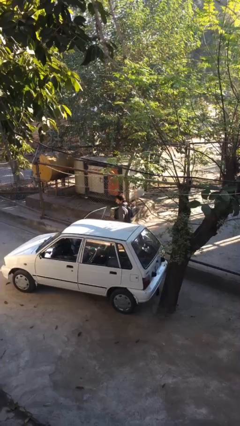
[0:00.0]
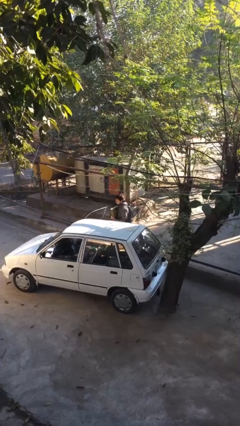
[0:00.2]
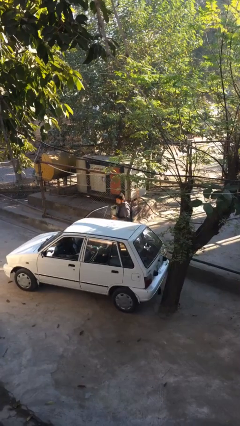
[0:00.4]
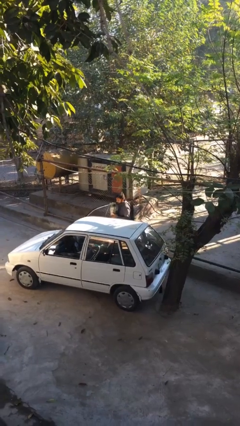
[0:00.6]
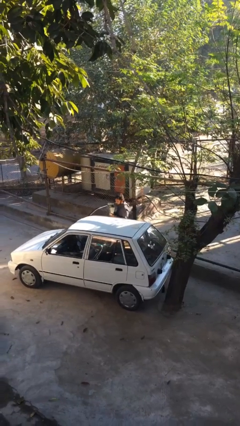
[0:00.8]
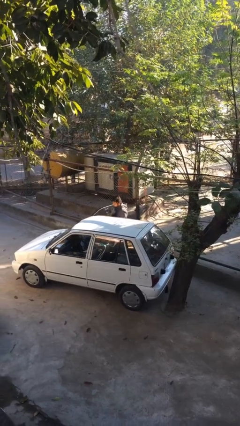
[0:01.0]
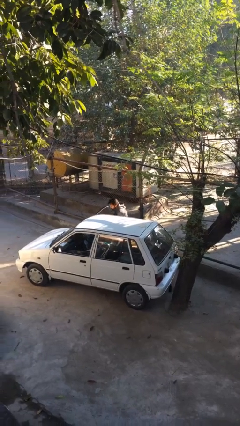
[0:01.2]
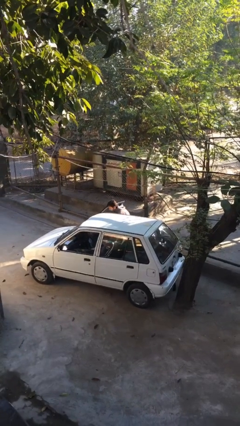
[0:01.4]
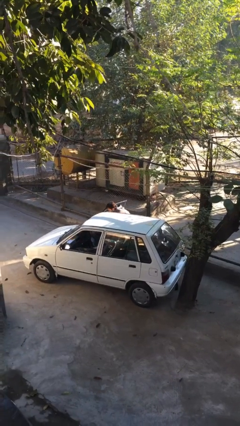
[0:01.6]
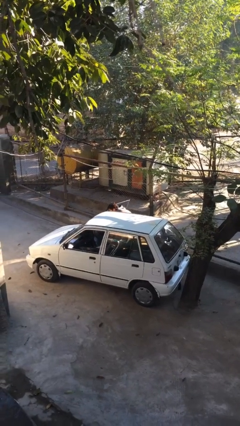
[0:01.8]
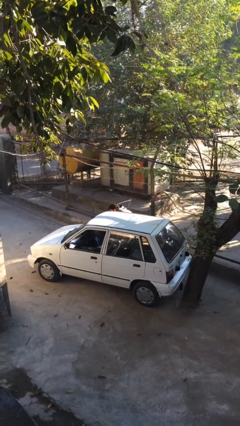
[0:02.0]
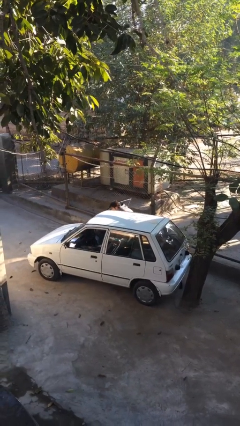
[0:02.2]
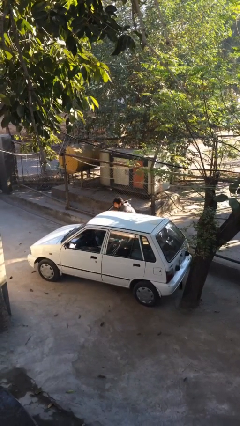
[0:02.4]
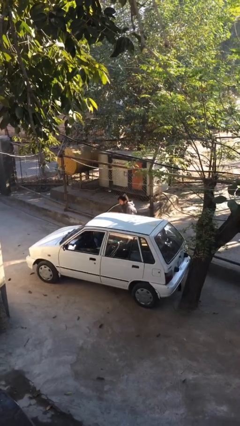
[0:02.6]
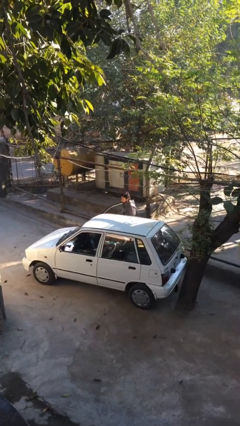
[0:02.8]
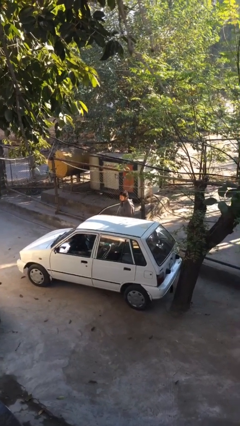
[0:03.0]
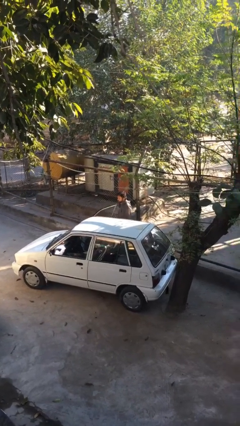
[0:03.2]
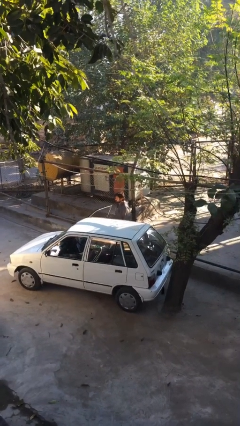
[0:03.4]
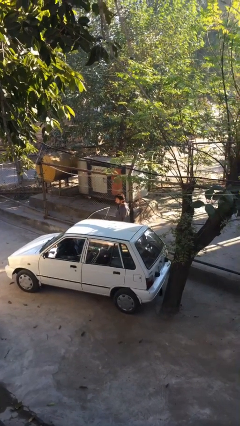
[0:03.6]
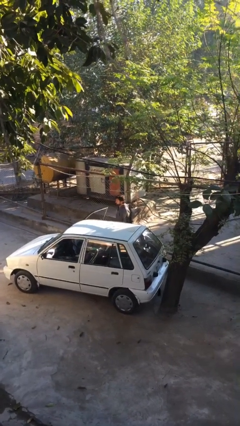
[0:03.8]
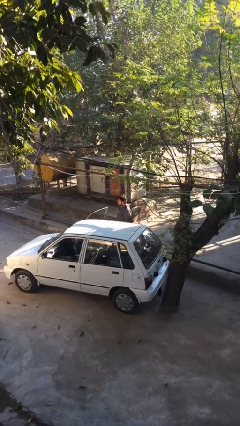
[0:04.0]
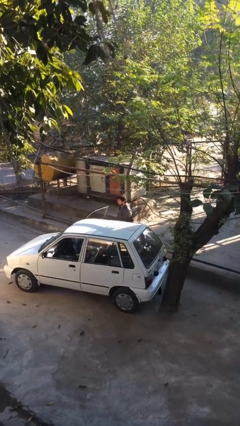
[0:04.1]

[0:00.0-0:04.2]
person loads car

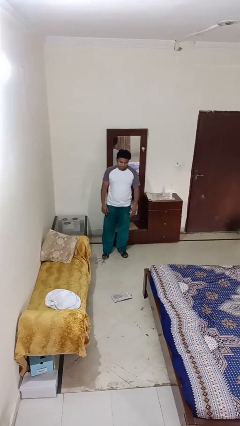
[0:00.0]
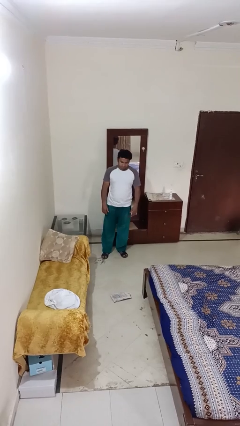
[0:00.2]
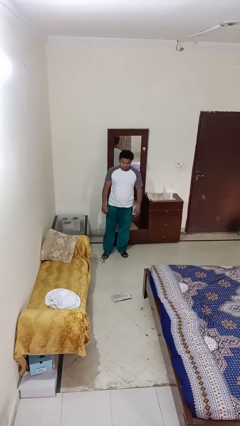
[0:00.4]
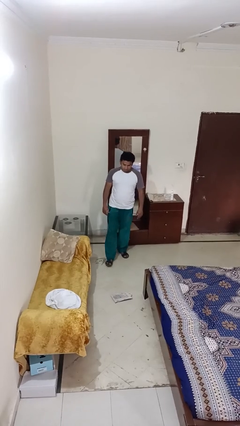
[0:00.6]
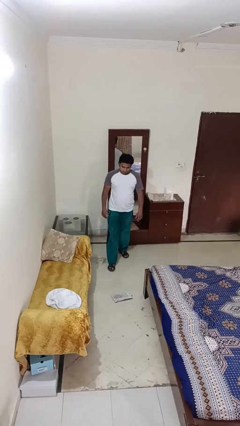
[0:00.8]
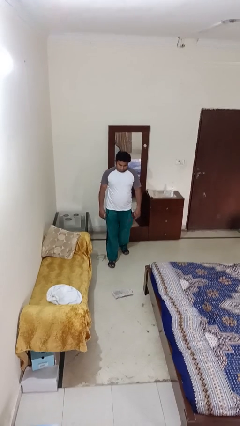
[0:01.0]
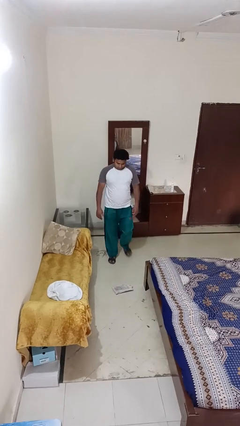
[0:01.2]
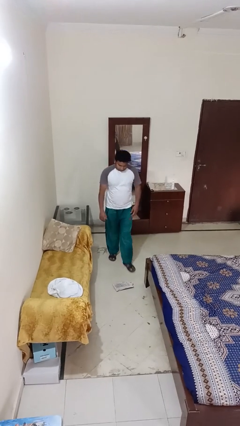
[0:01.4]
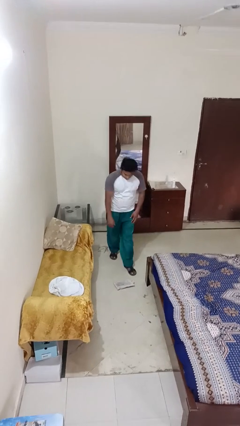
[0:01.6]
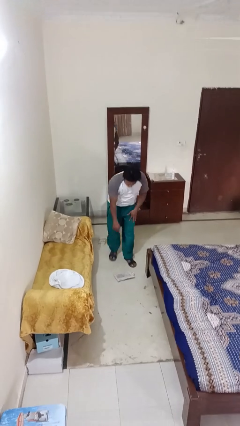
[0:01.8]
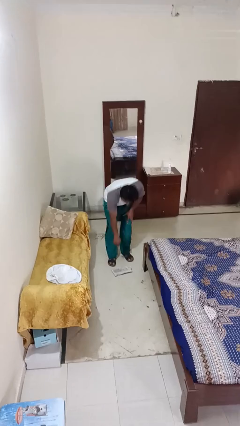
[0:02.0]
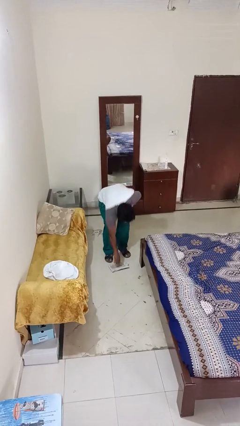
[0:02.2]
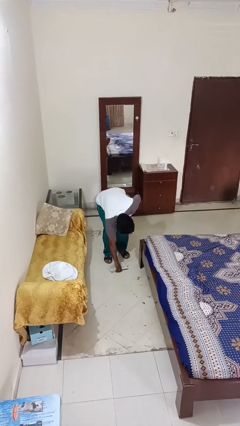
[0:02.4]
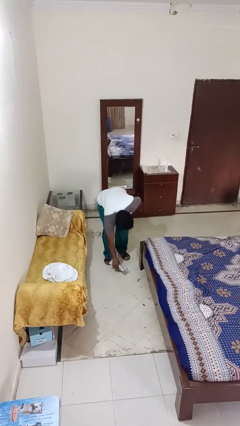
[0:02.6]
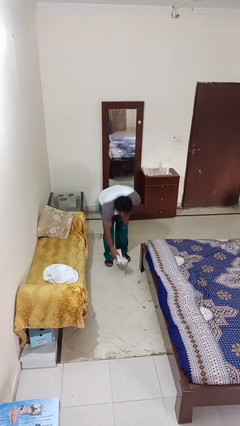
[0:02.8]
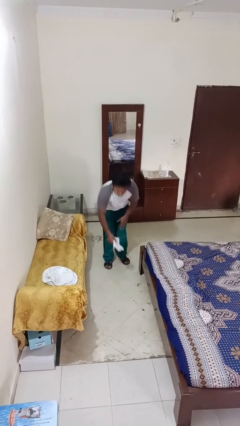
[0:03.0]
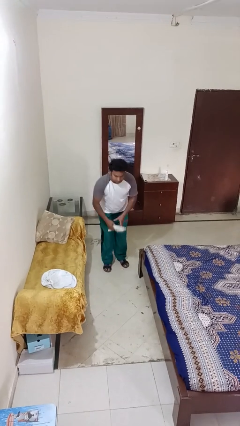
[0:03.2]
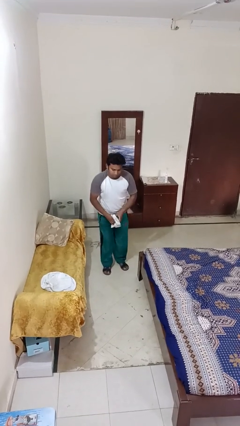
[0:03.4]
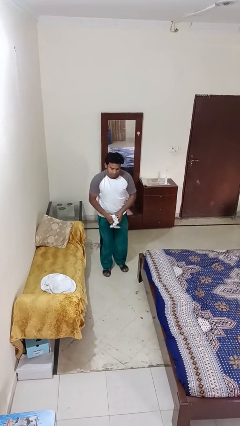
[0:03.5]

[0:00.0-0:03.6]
person picks up object from floor

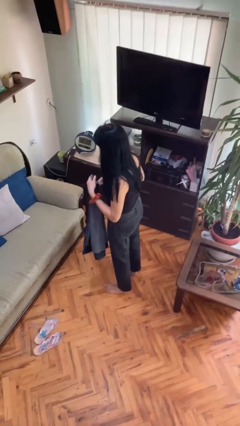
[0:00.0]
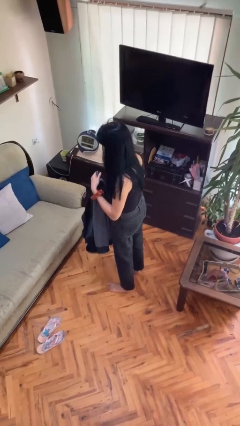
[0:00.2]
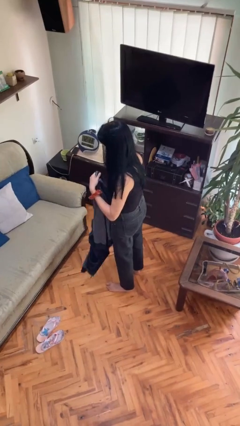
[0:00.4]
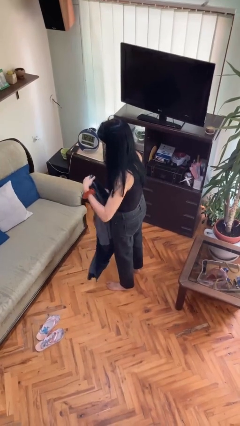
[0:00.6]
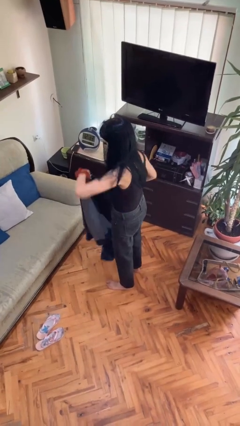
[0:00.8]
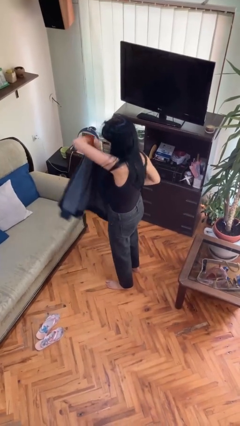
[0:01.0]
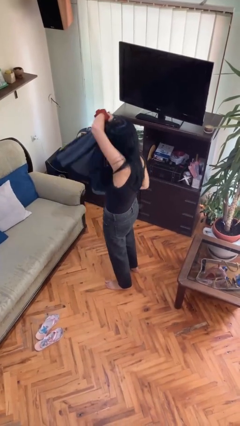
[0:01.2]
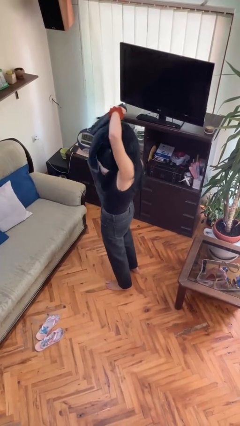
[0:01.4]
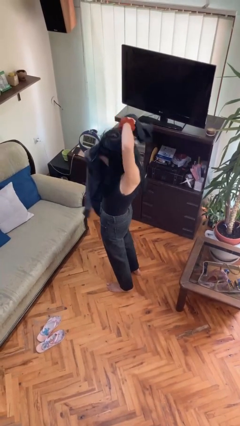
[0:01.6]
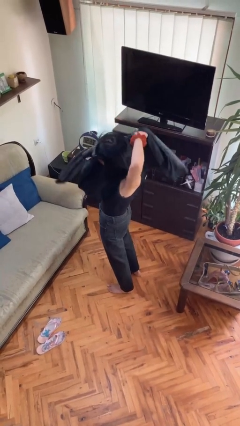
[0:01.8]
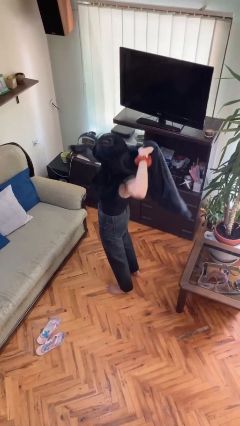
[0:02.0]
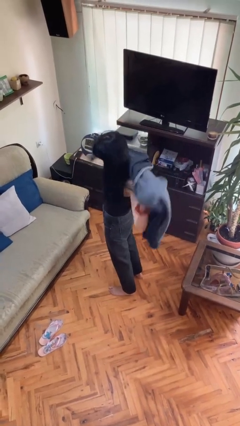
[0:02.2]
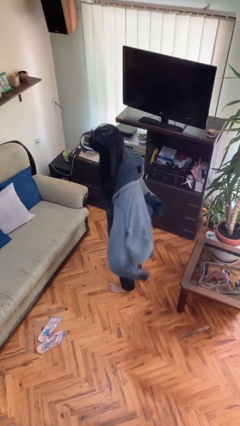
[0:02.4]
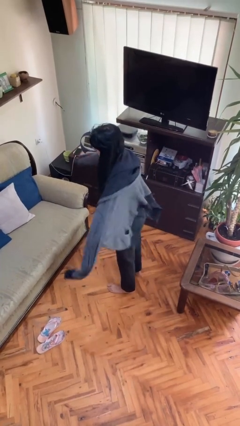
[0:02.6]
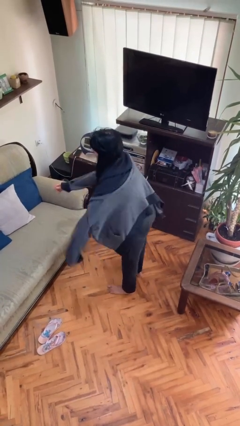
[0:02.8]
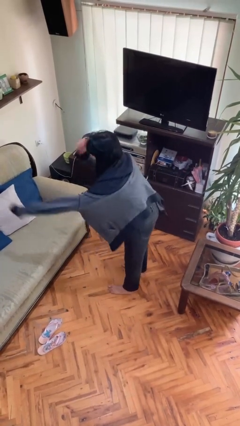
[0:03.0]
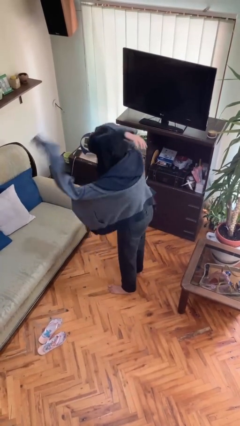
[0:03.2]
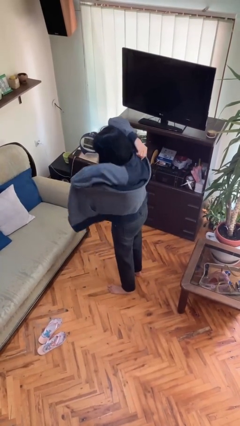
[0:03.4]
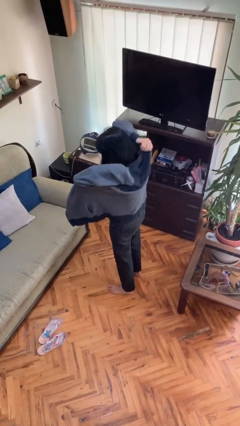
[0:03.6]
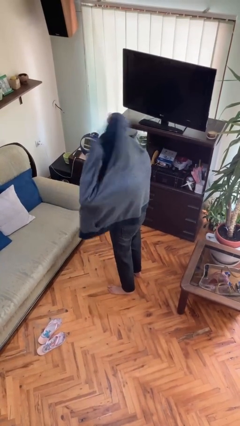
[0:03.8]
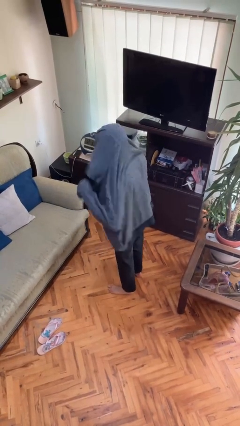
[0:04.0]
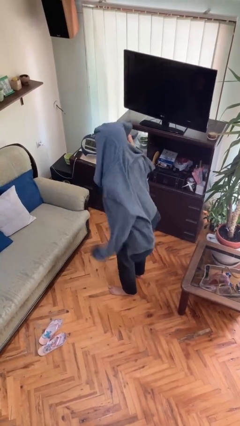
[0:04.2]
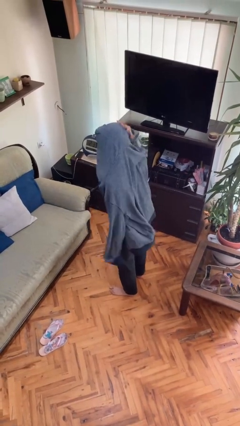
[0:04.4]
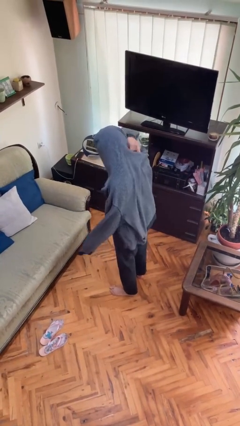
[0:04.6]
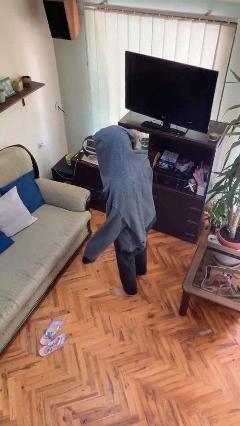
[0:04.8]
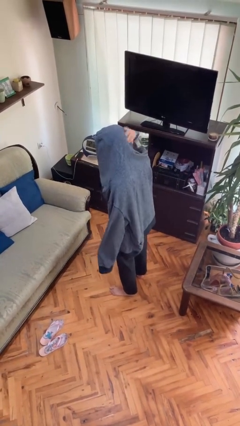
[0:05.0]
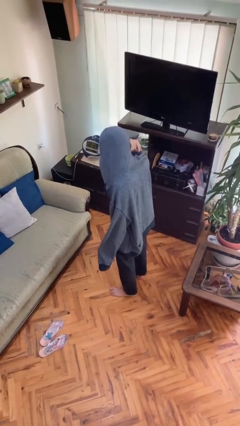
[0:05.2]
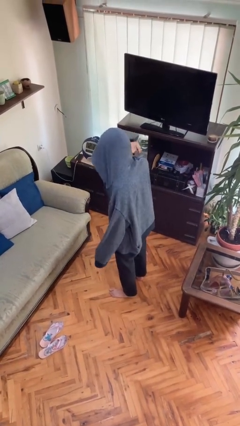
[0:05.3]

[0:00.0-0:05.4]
person puts on hoodie

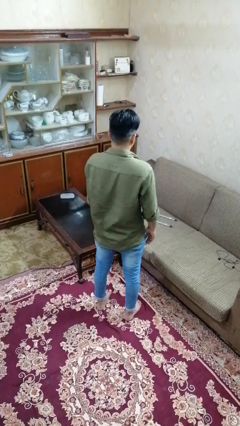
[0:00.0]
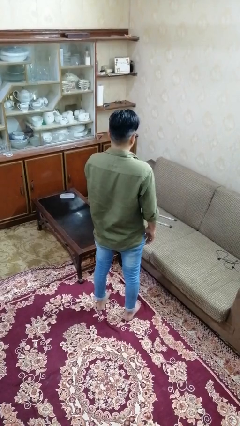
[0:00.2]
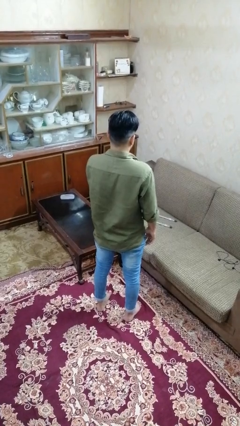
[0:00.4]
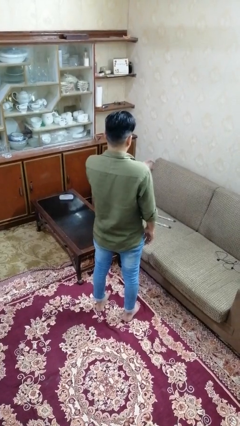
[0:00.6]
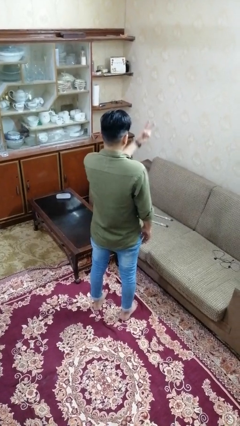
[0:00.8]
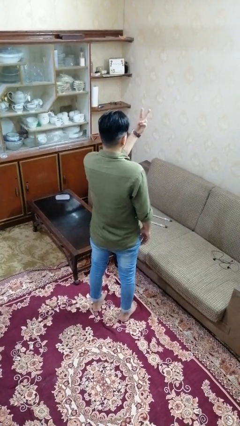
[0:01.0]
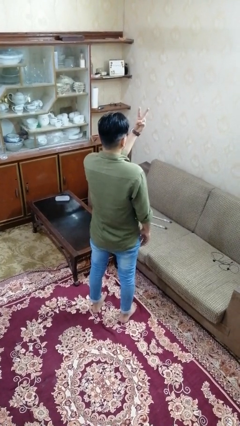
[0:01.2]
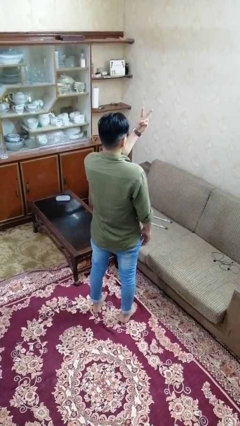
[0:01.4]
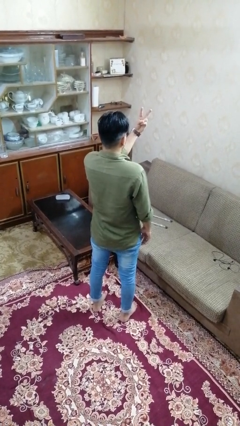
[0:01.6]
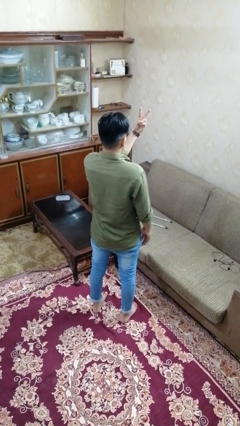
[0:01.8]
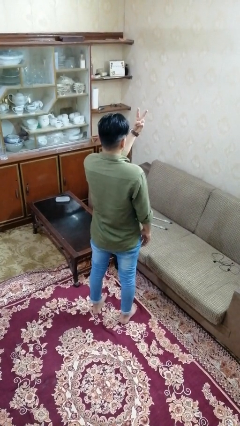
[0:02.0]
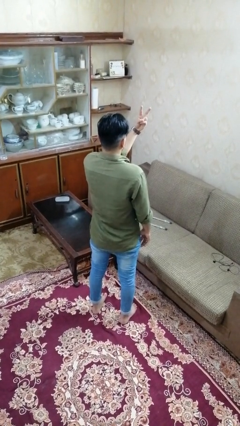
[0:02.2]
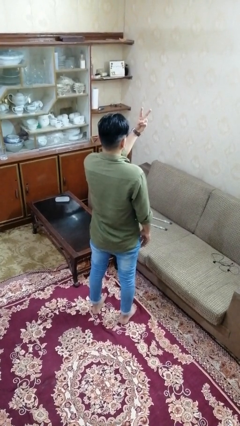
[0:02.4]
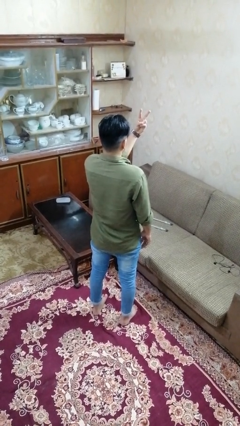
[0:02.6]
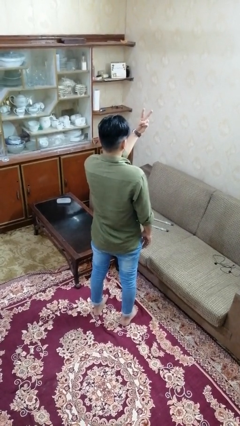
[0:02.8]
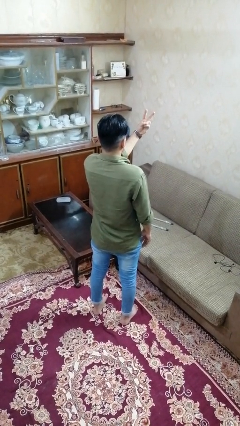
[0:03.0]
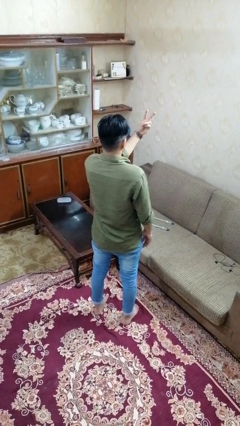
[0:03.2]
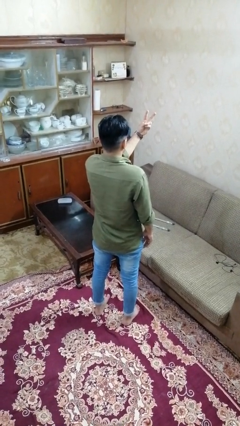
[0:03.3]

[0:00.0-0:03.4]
person gestures peace

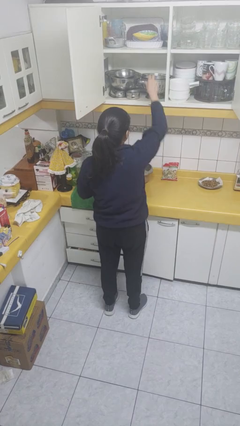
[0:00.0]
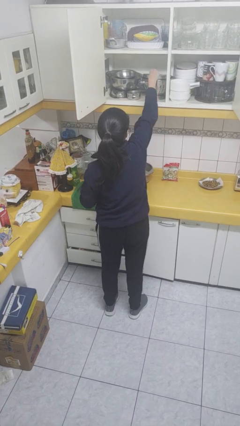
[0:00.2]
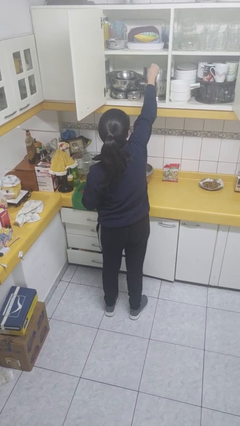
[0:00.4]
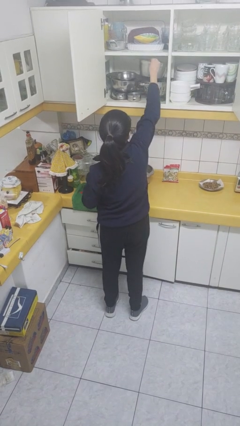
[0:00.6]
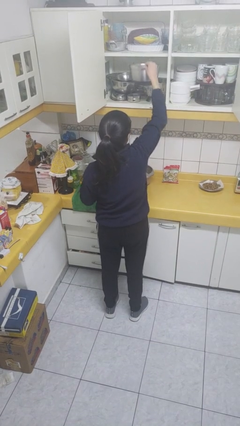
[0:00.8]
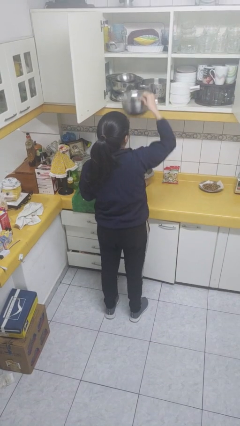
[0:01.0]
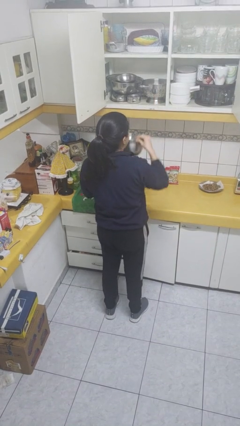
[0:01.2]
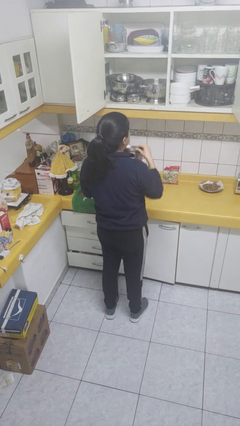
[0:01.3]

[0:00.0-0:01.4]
person picks up object from cabinet
